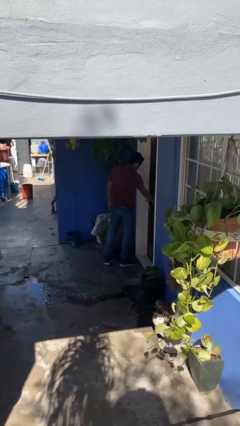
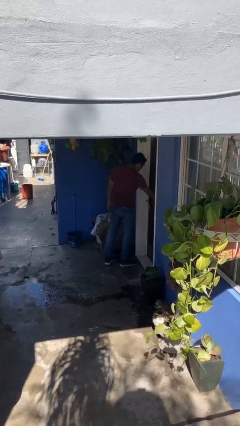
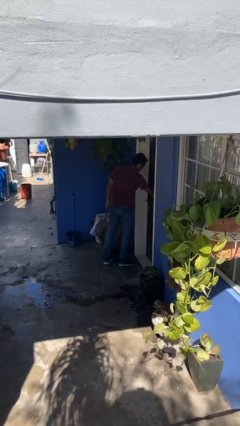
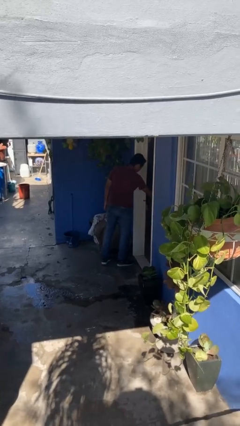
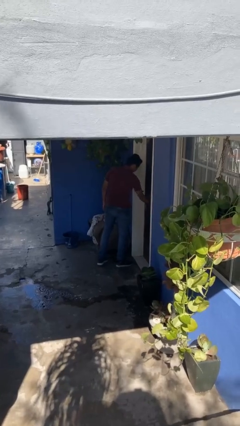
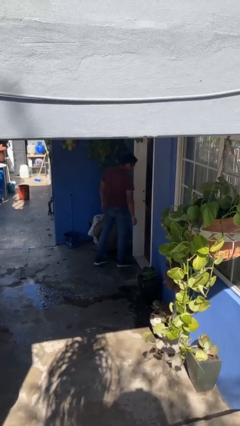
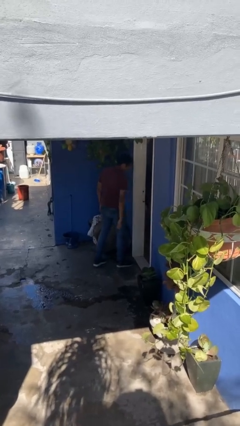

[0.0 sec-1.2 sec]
person opens facility door

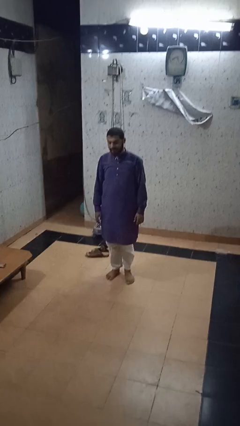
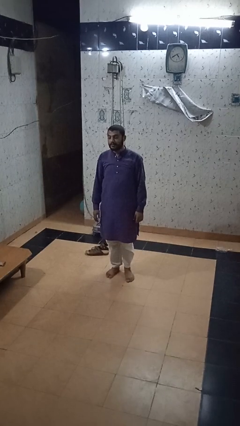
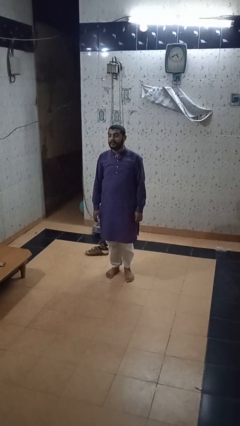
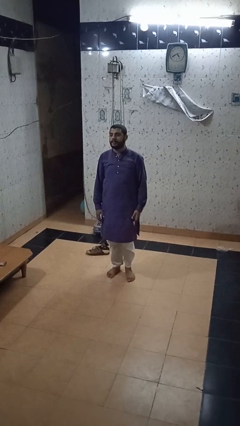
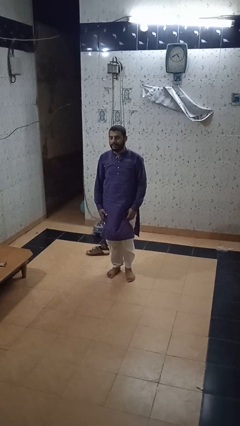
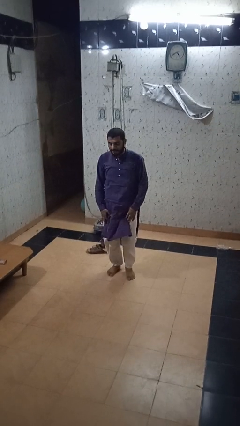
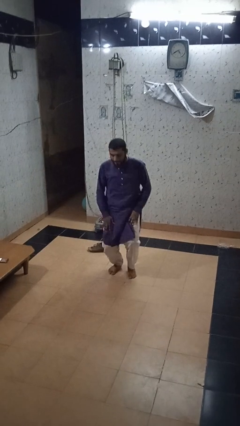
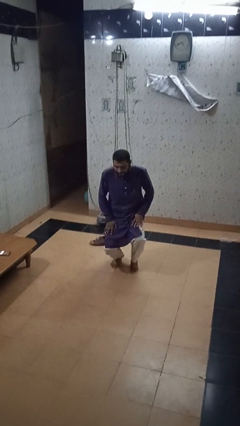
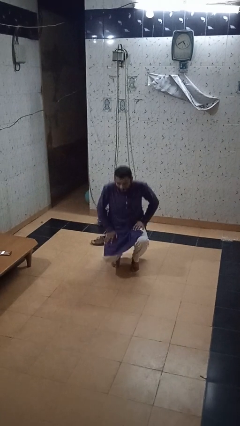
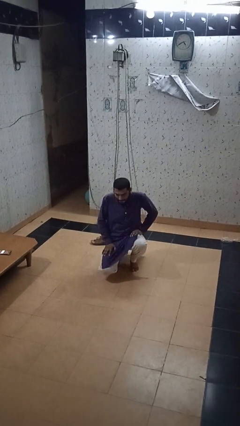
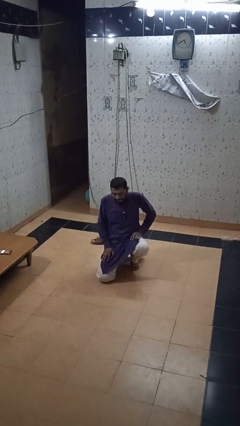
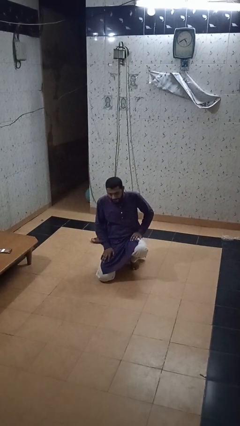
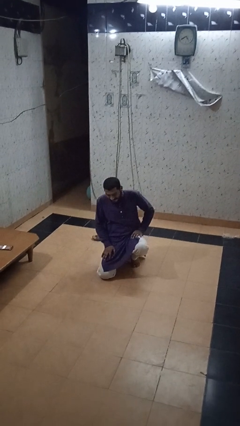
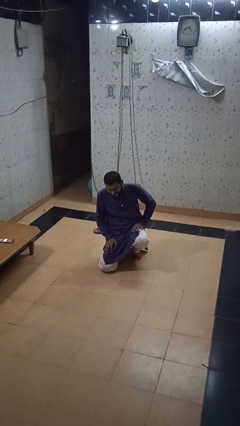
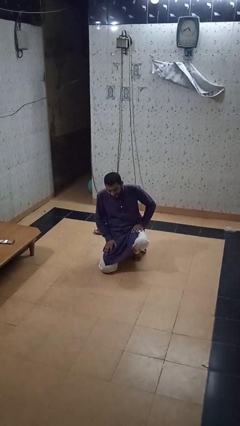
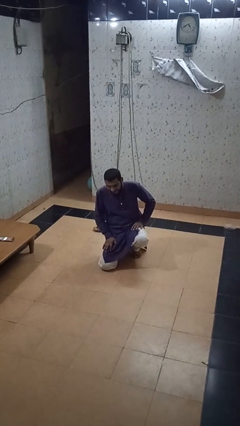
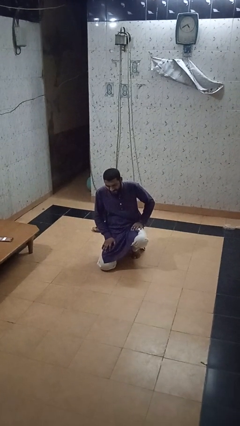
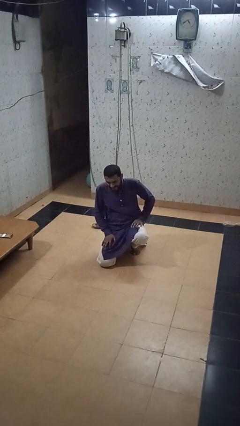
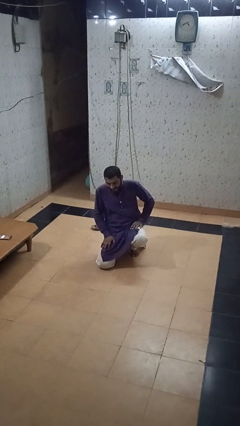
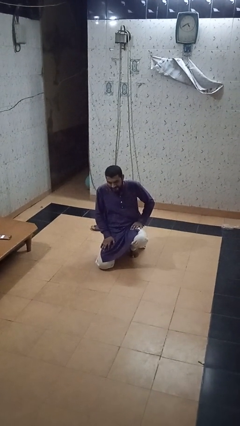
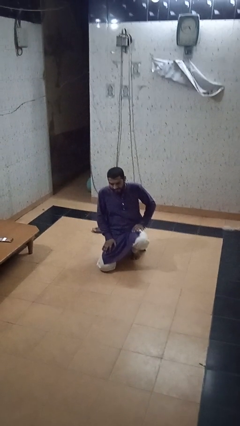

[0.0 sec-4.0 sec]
person kneels

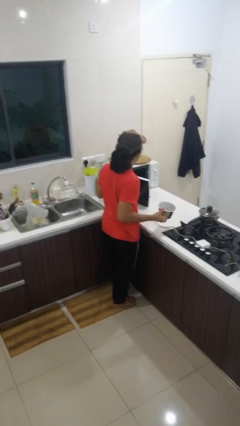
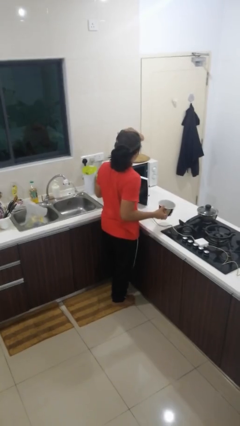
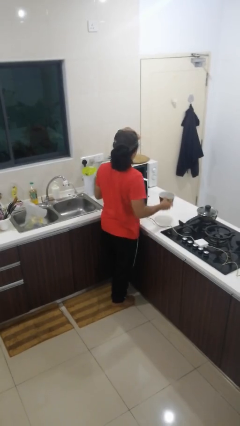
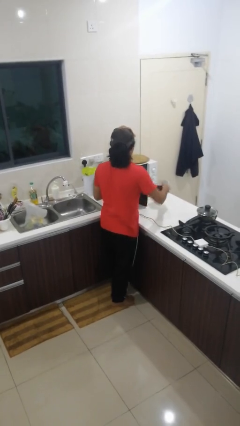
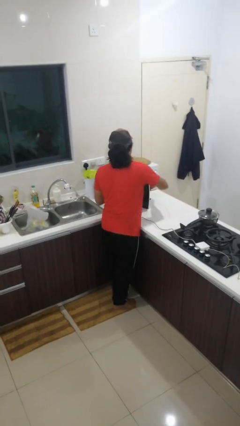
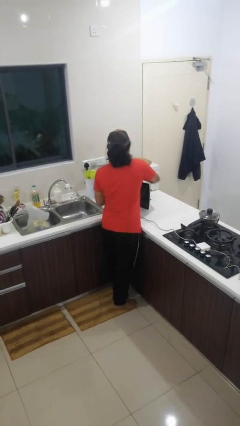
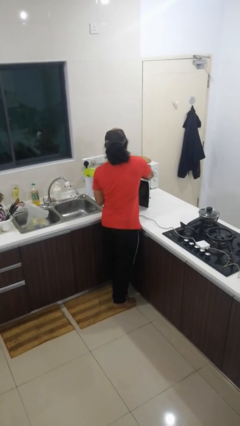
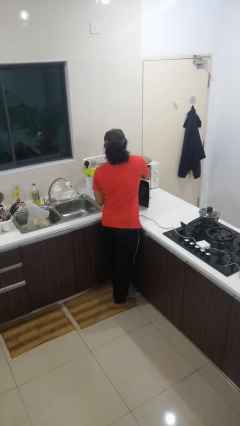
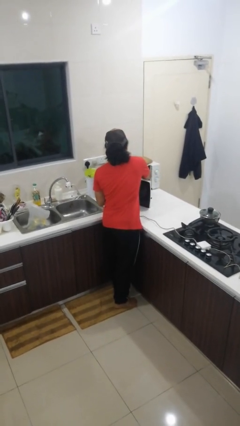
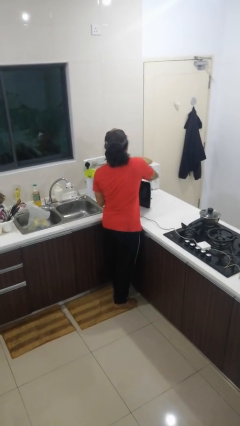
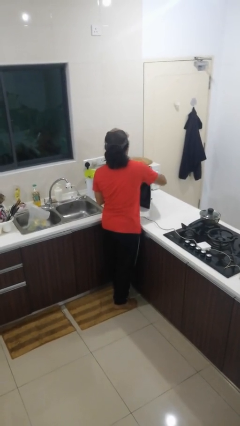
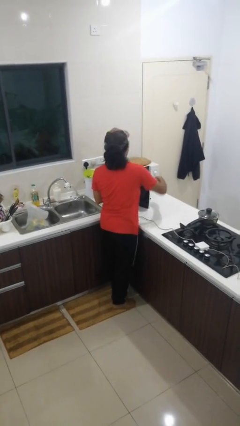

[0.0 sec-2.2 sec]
person puts object into microwave

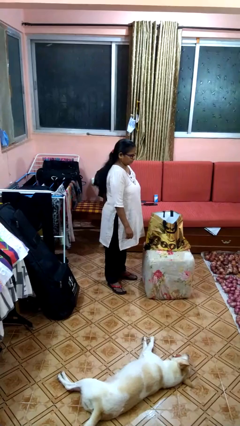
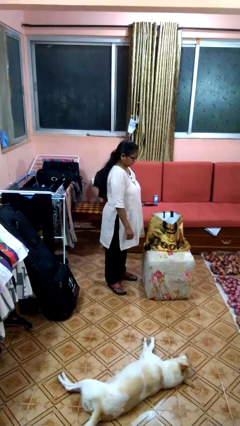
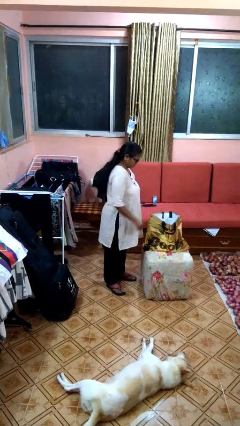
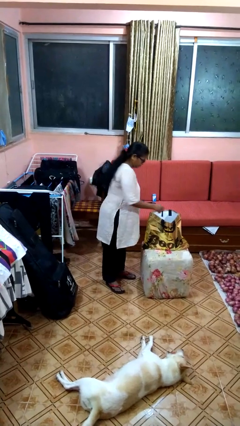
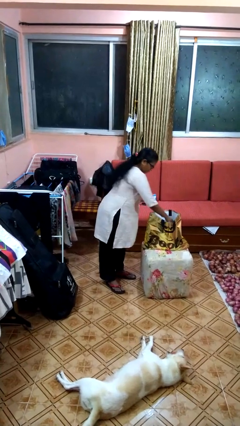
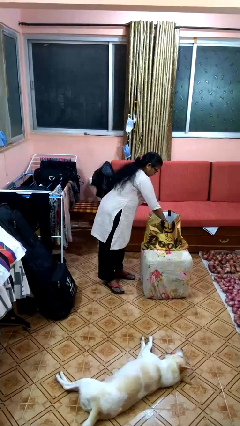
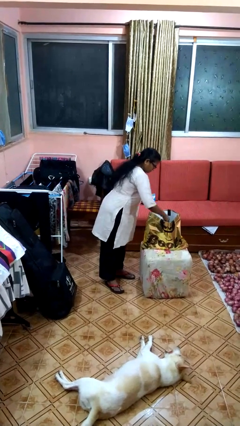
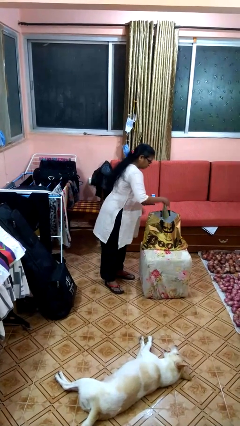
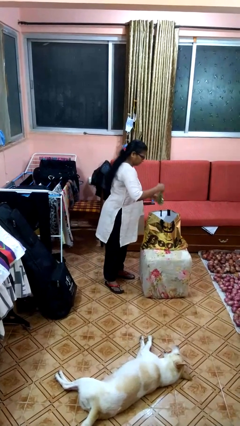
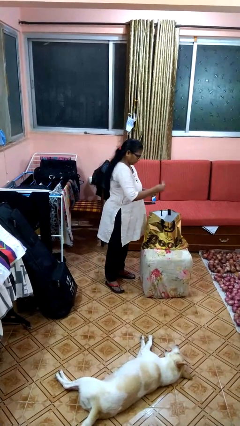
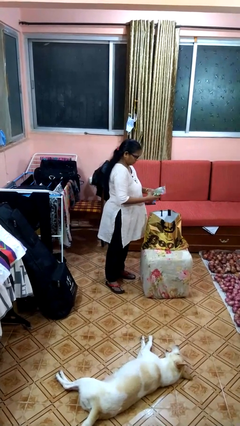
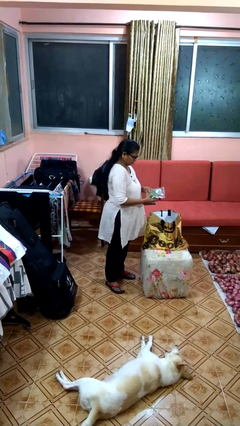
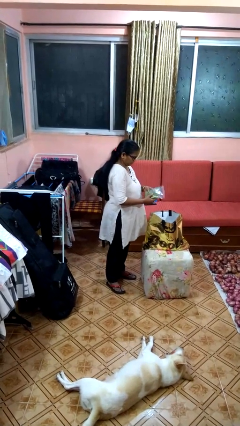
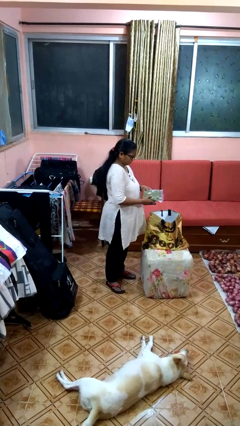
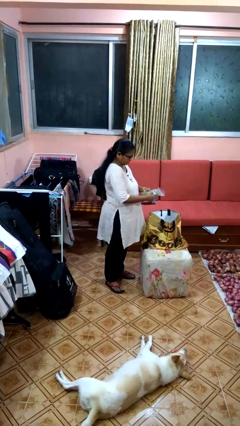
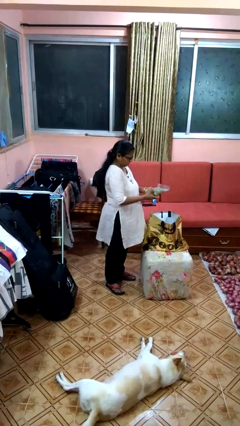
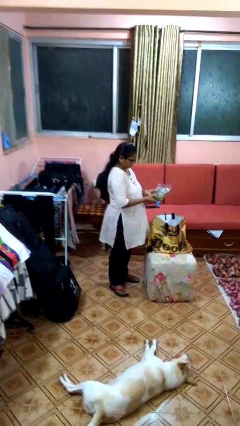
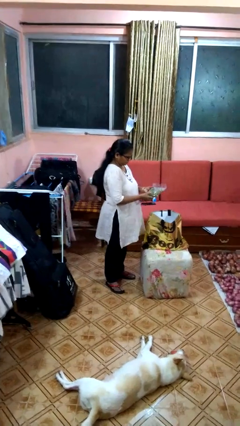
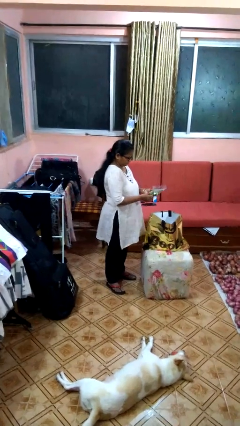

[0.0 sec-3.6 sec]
person takes object from bag

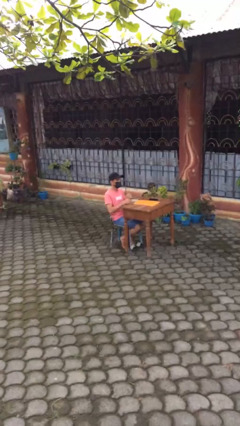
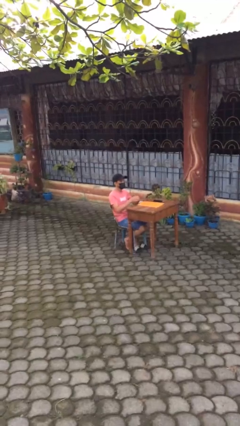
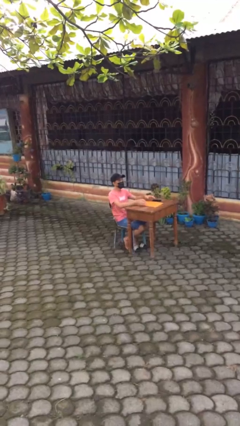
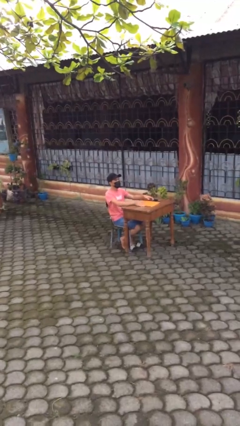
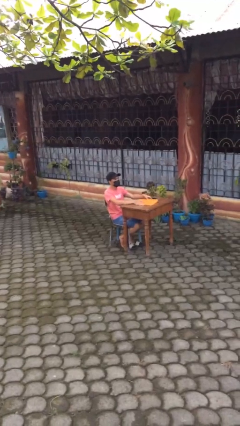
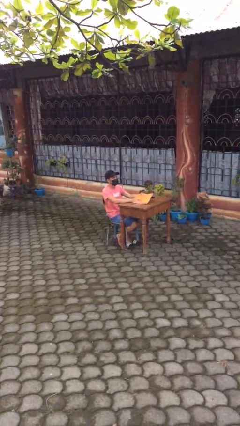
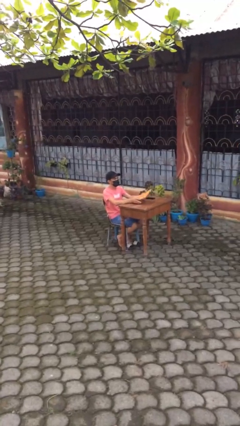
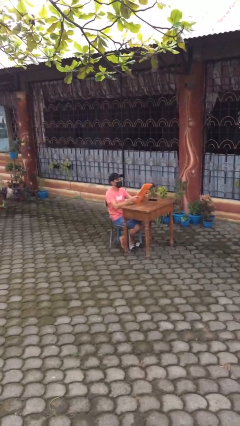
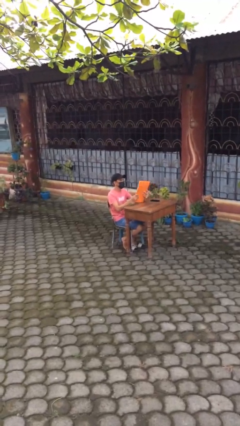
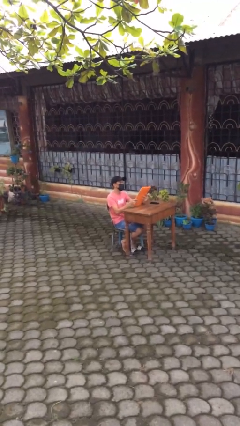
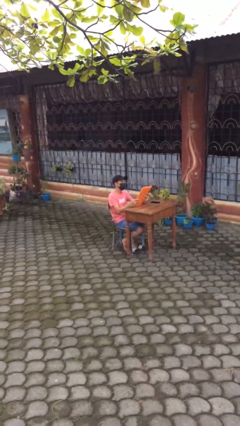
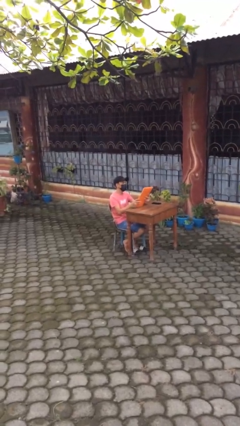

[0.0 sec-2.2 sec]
person picks up object from table

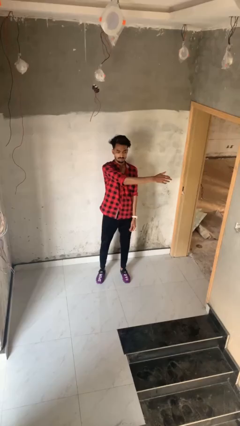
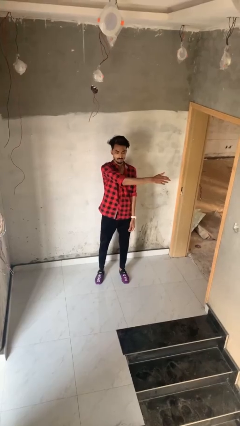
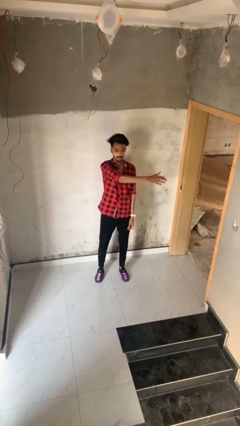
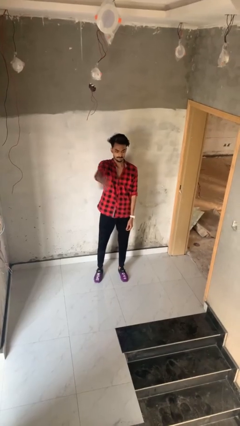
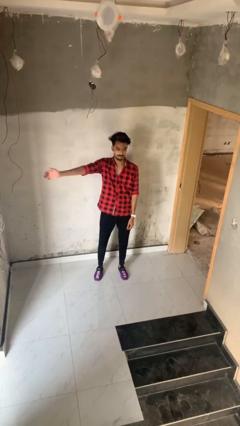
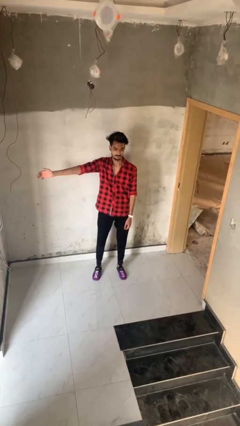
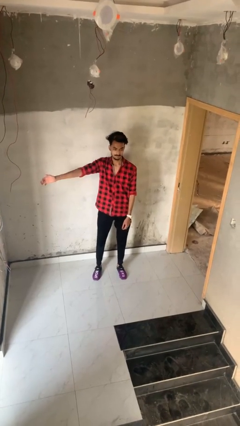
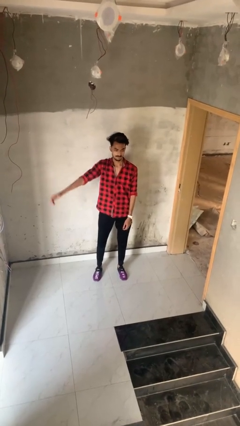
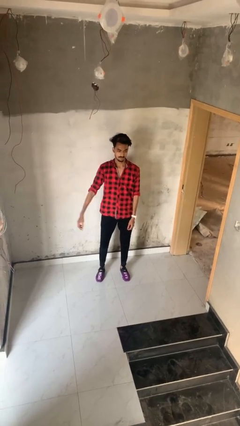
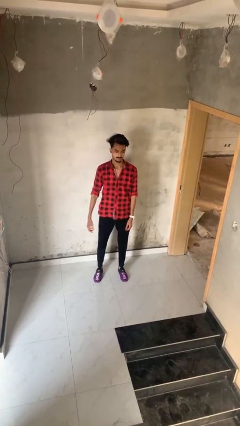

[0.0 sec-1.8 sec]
person gestures swipe right

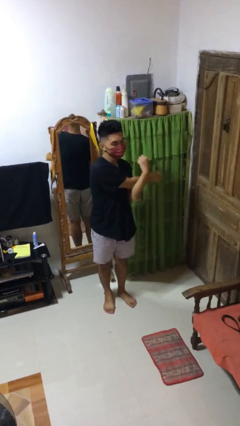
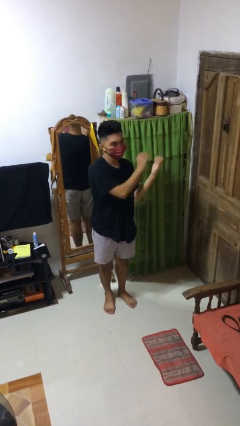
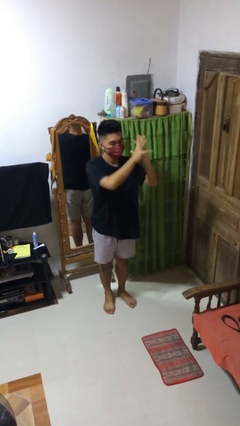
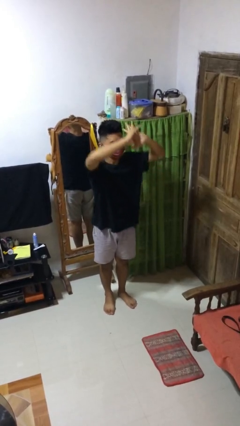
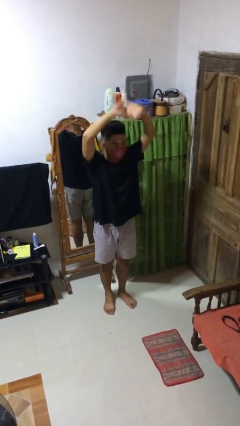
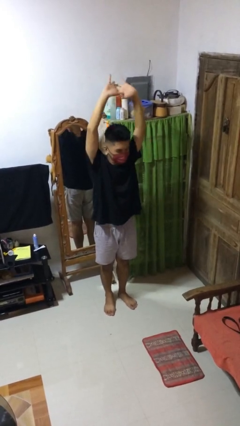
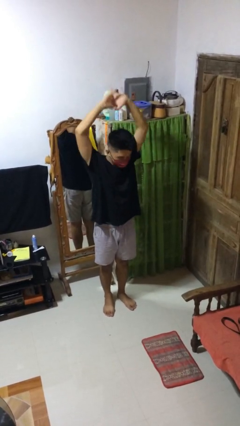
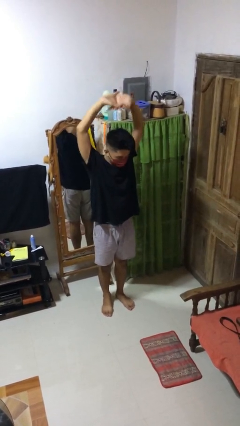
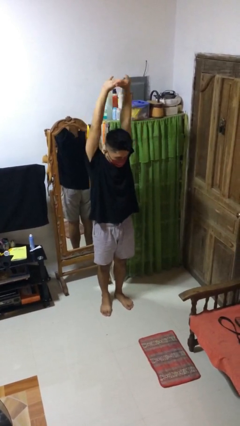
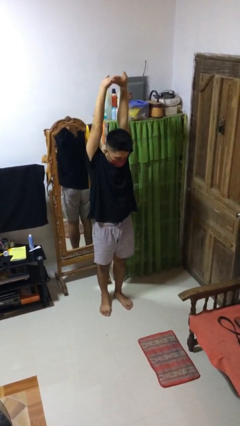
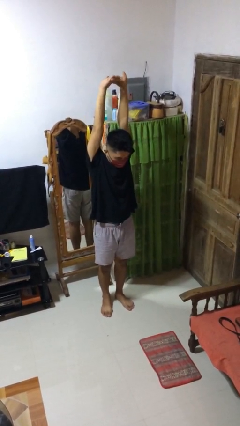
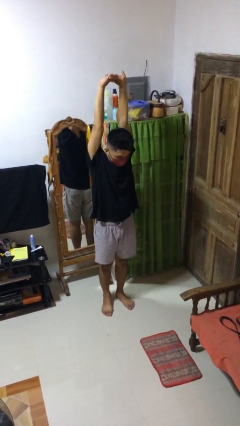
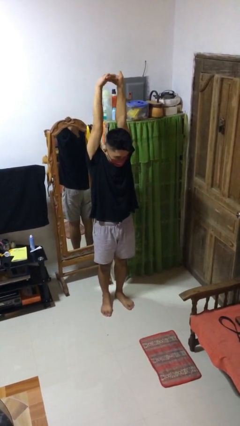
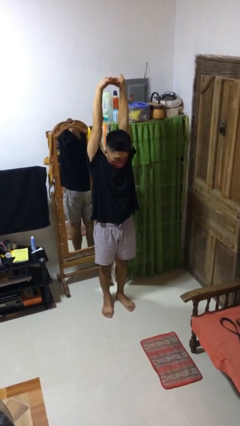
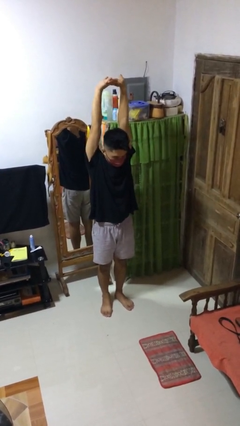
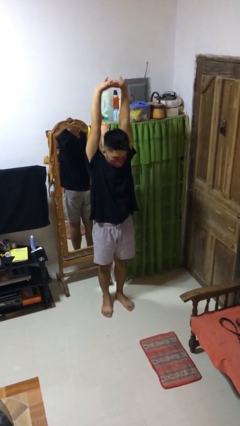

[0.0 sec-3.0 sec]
person stretches arms over head
